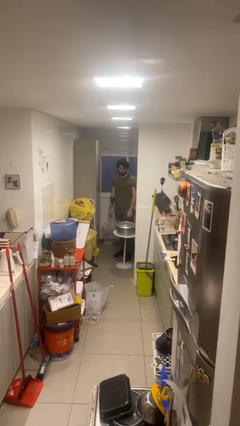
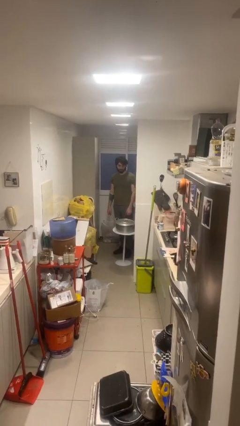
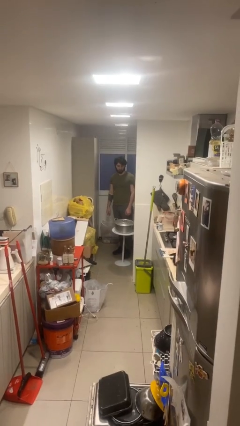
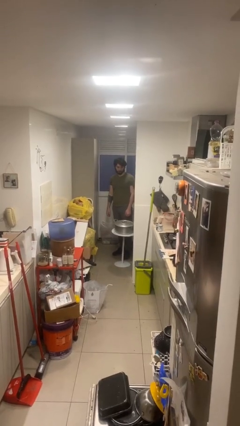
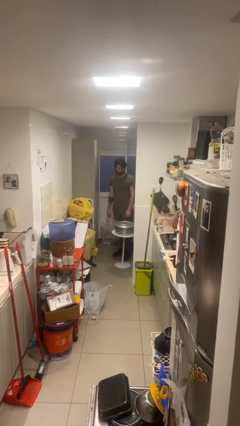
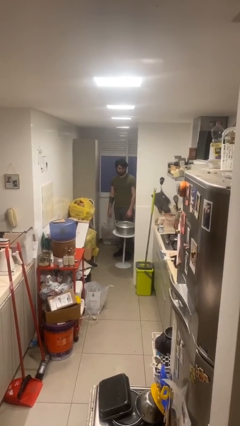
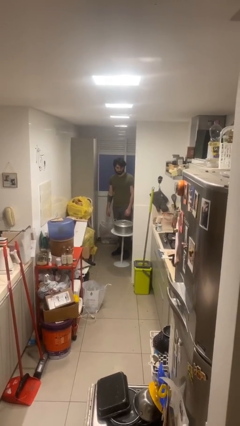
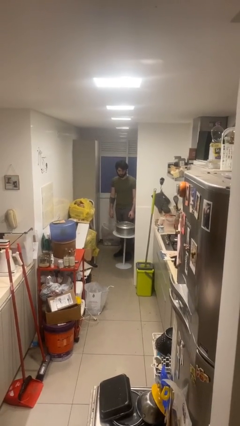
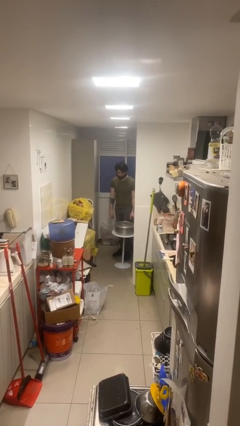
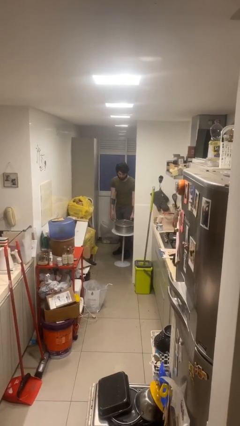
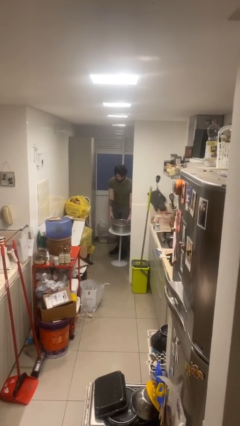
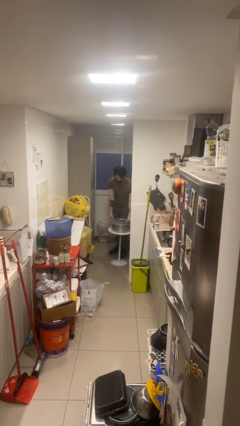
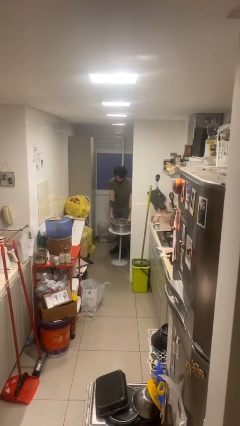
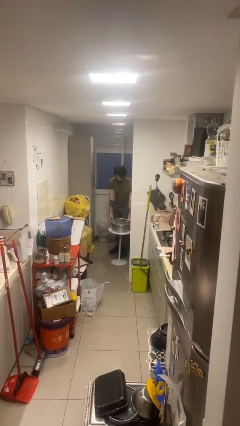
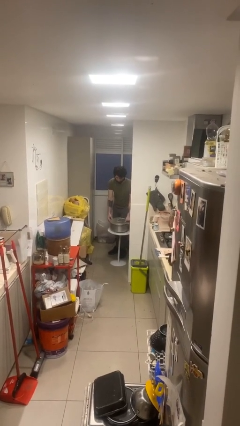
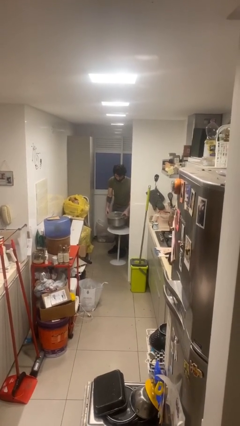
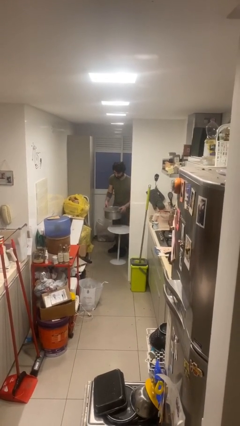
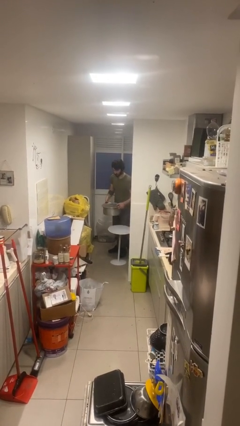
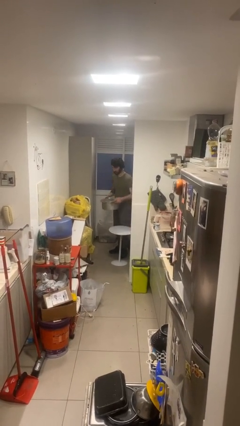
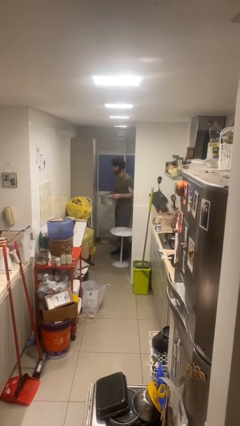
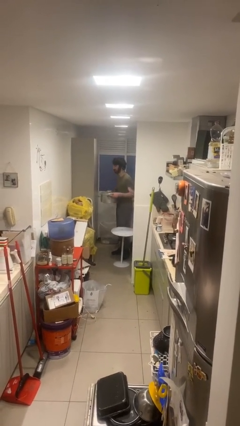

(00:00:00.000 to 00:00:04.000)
person picks up object from table

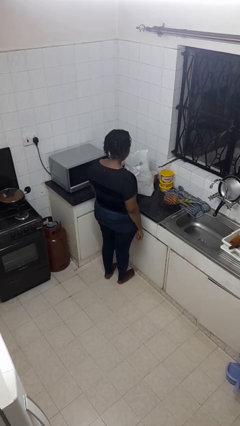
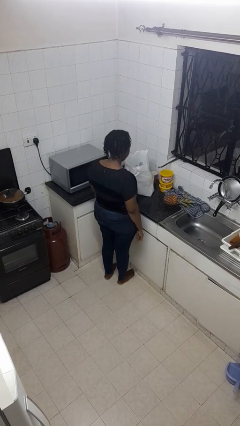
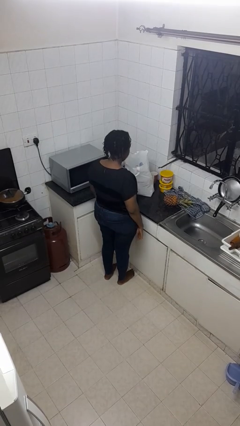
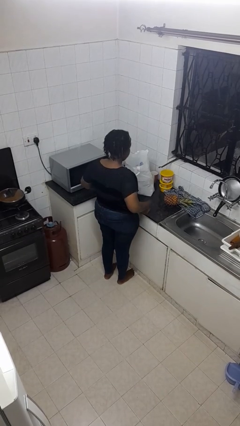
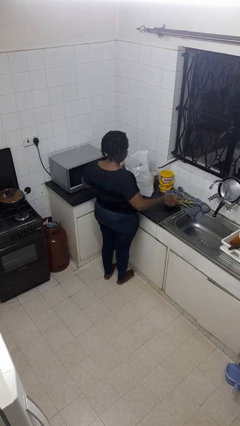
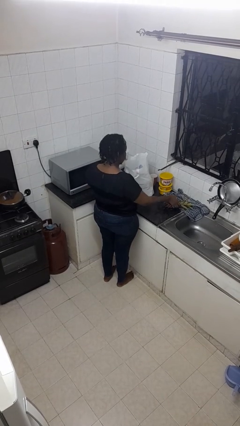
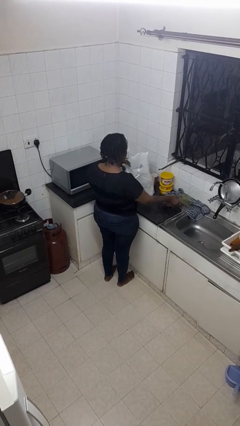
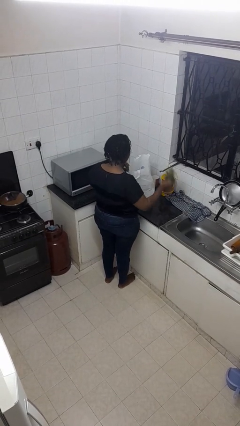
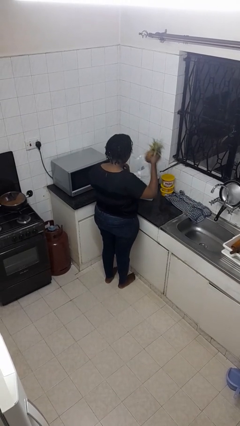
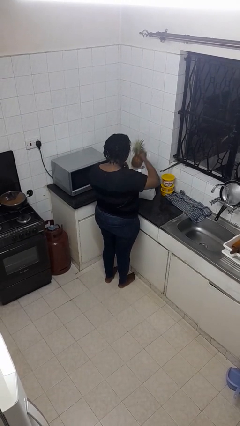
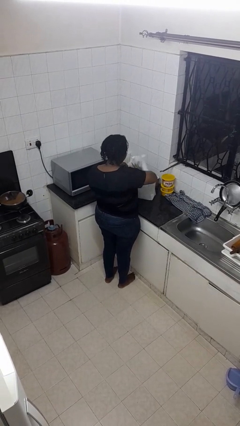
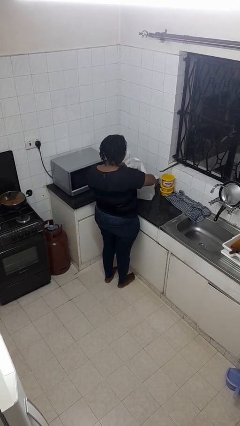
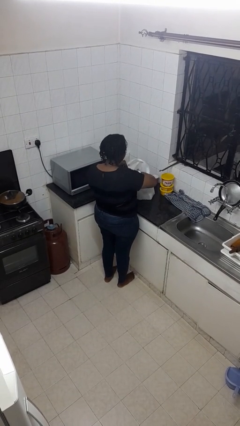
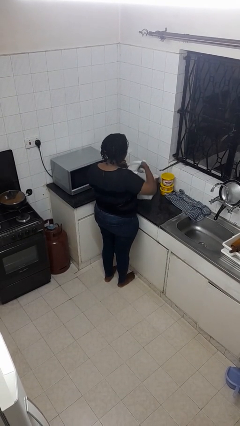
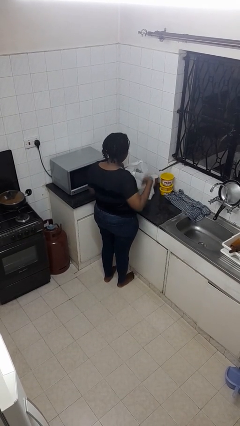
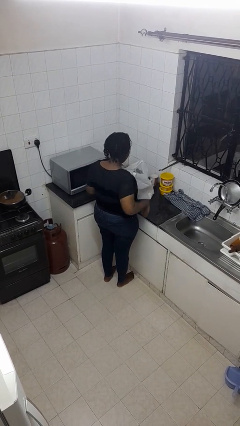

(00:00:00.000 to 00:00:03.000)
person puts object into bag

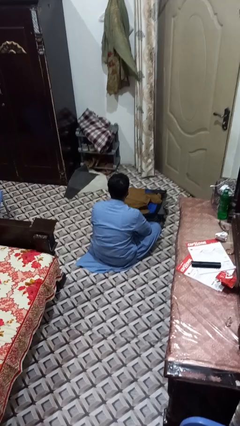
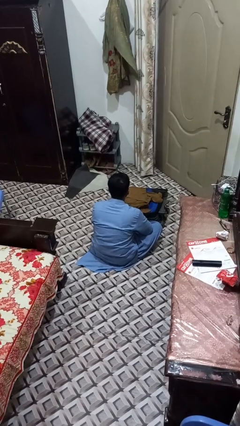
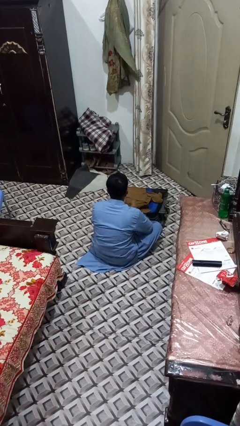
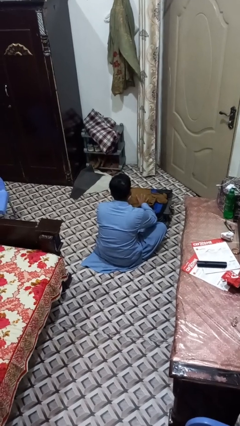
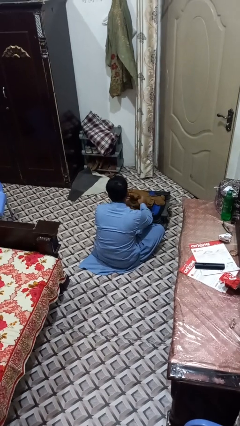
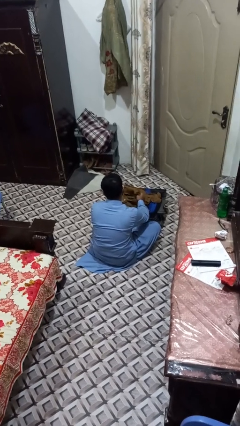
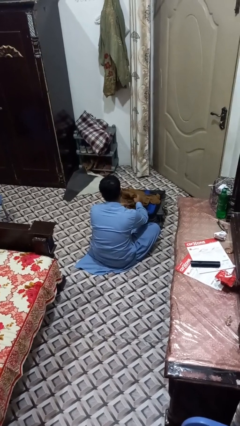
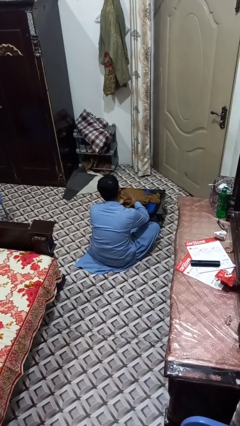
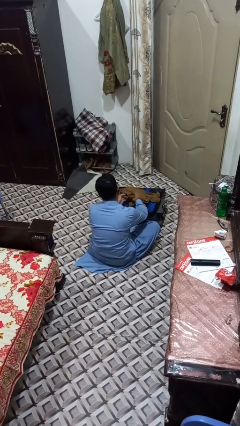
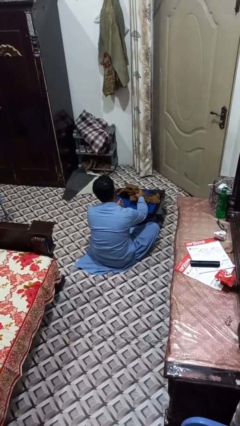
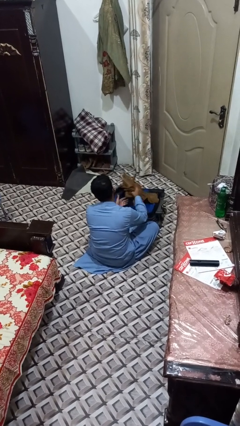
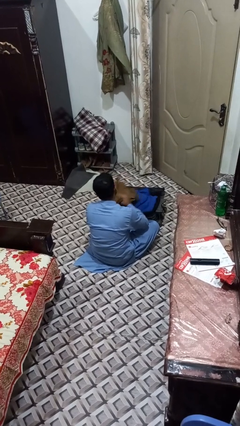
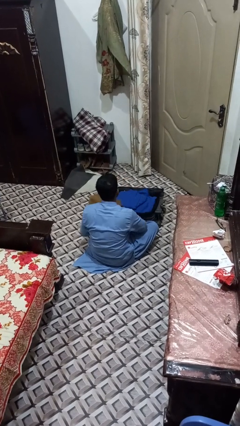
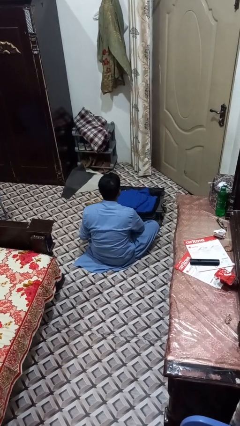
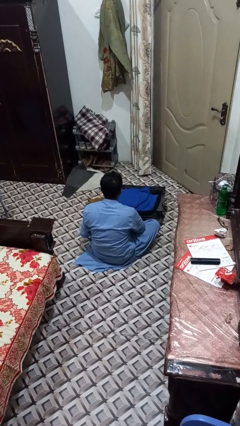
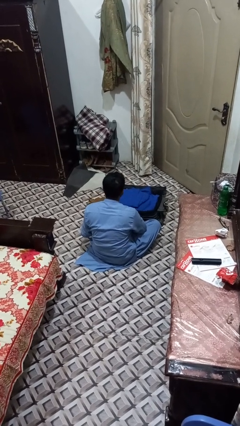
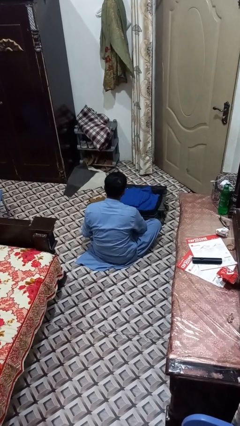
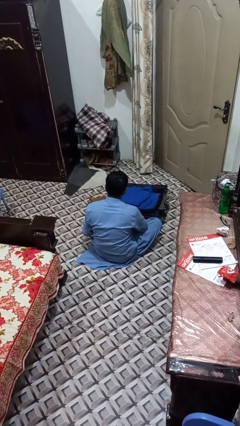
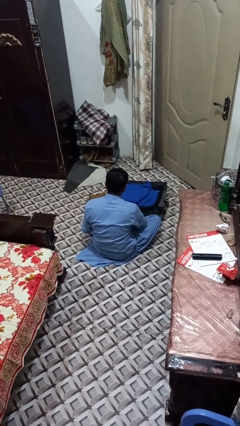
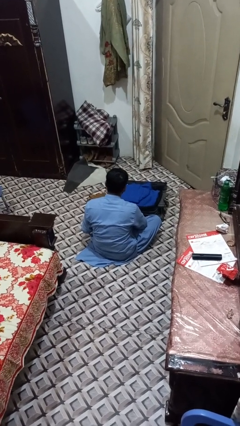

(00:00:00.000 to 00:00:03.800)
person unloads clothes from suitcase

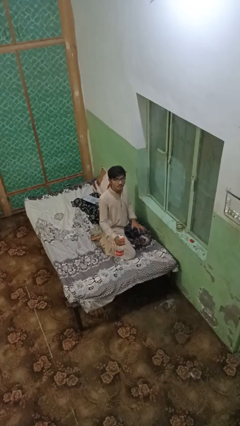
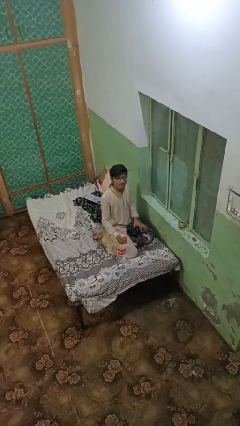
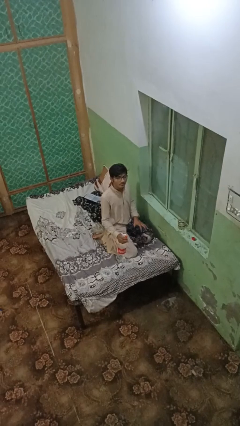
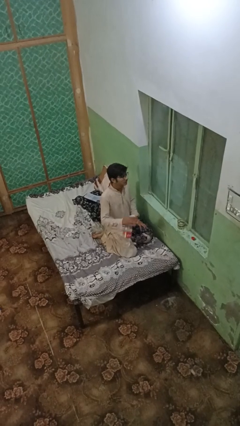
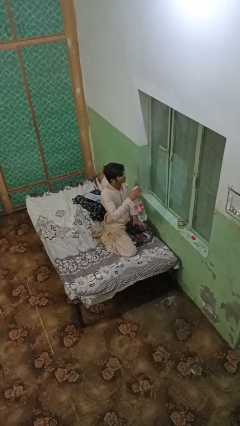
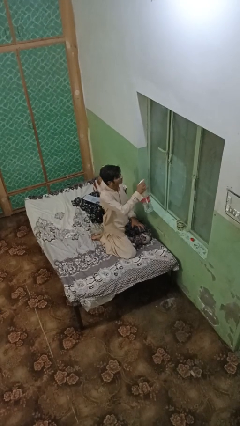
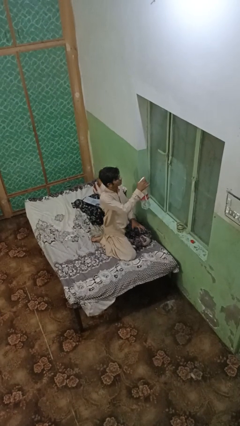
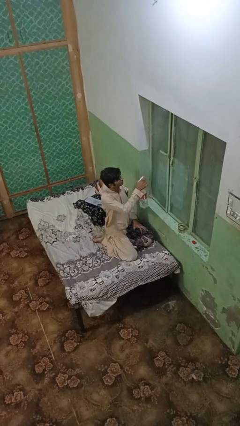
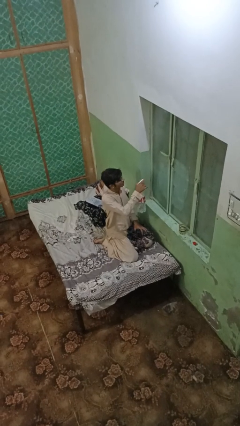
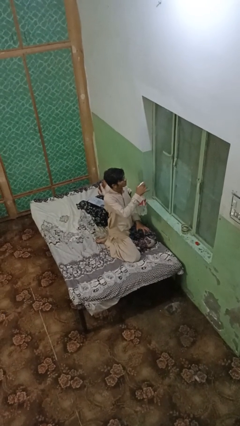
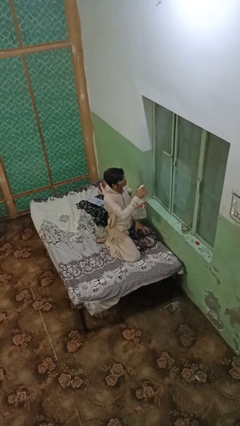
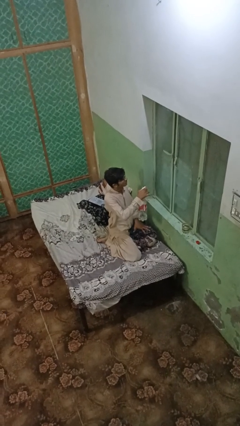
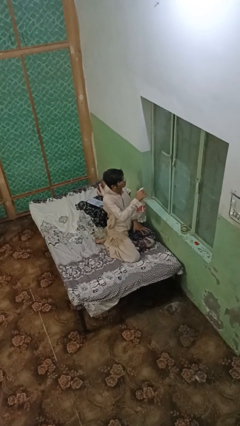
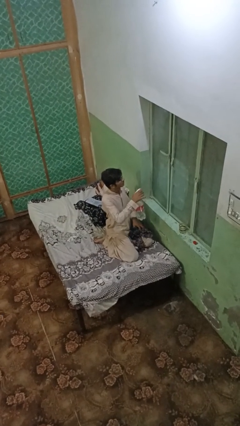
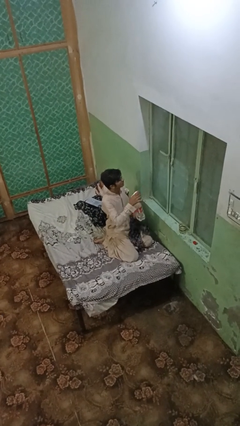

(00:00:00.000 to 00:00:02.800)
person sprays from bottle

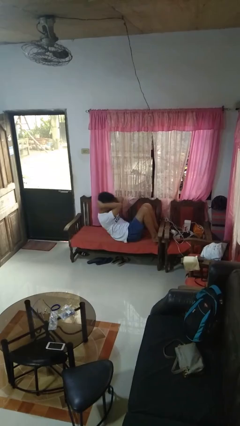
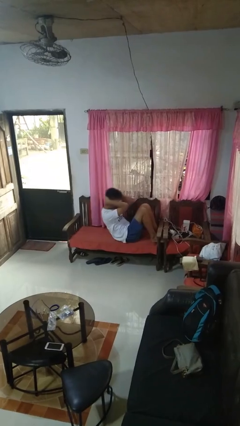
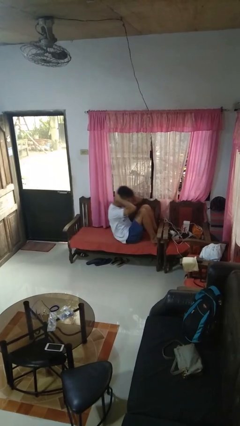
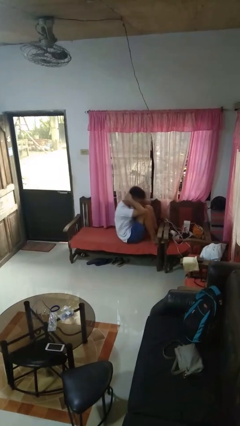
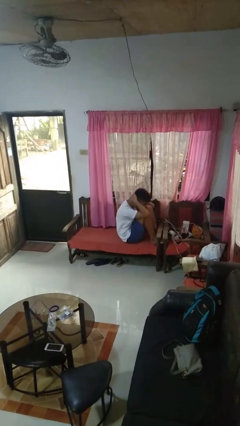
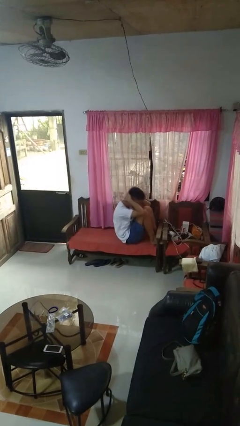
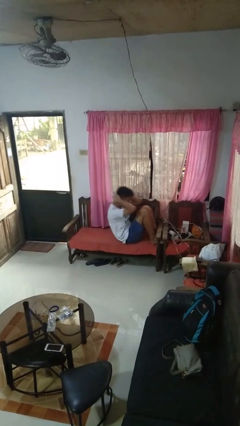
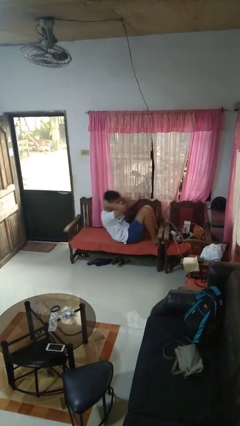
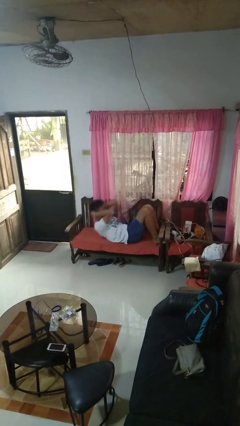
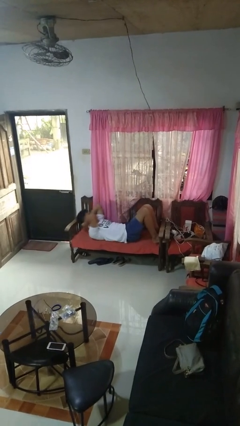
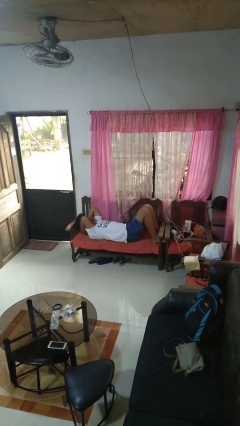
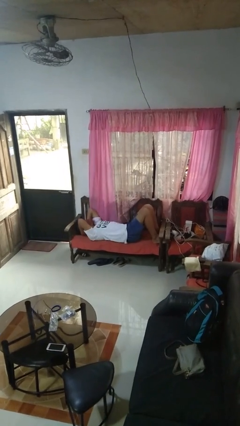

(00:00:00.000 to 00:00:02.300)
person exercises with situp

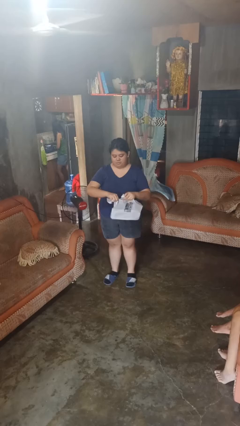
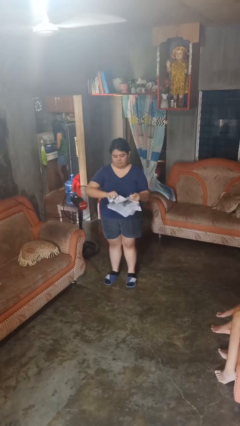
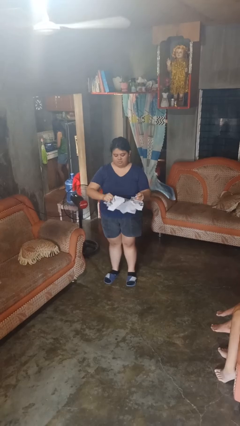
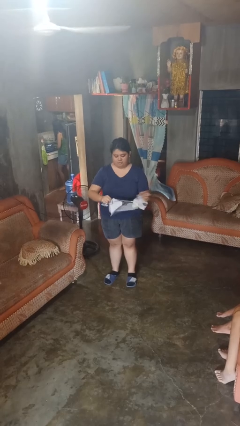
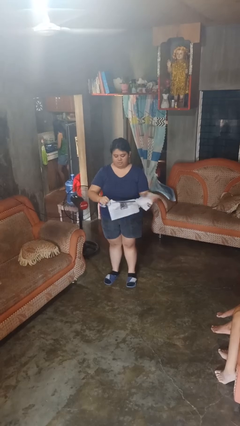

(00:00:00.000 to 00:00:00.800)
person tears paper

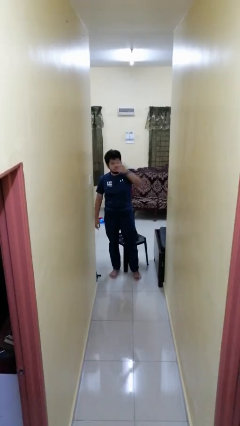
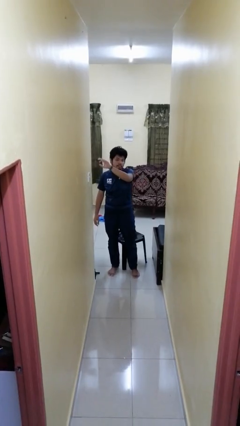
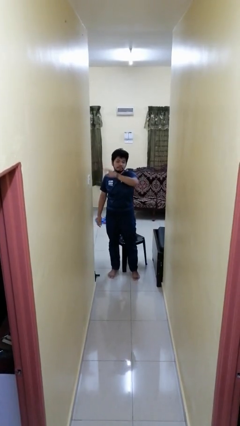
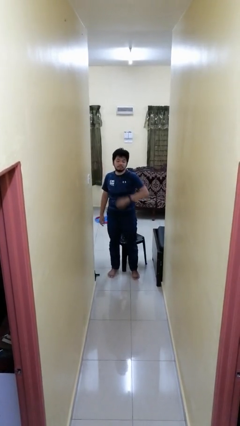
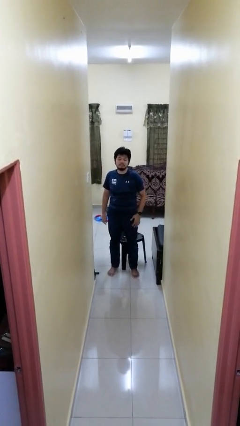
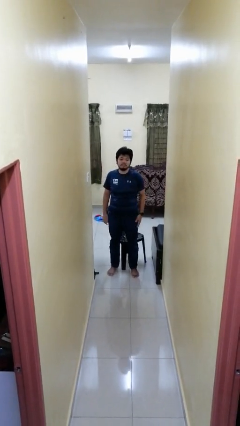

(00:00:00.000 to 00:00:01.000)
person gestures swipe right
